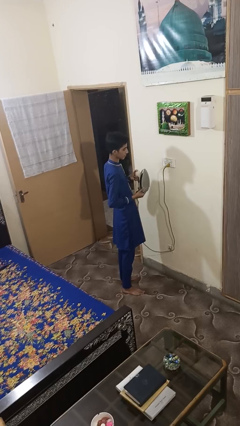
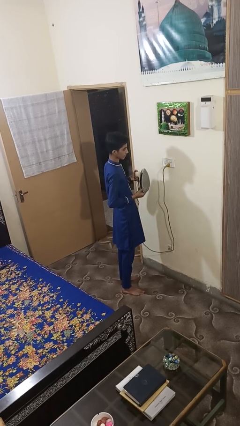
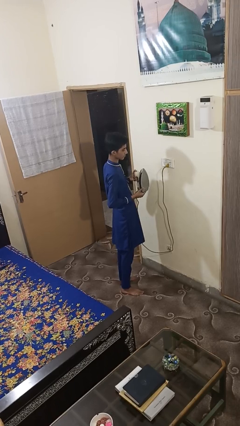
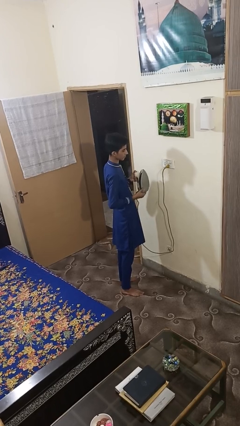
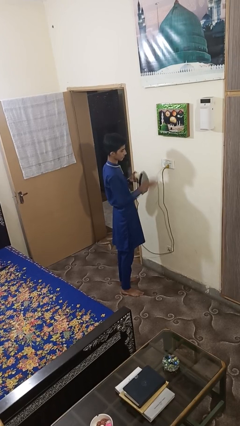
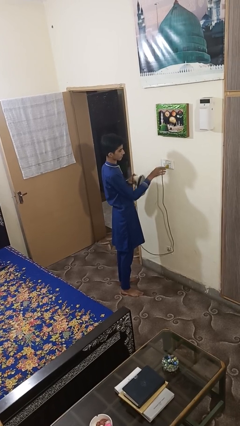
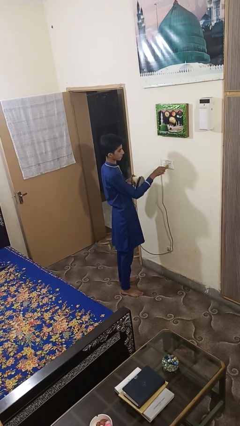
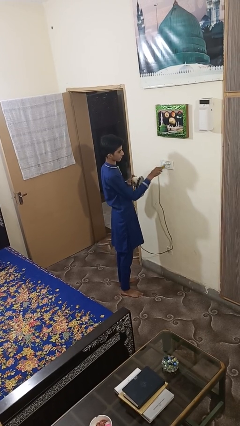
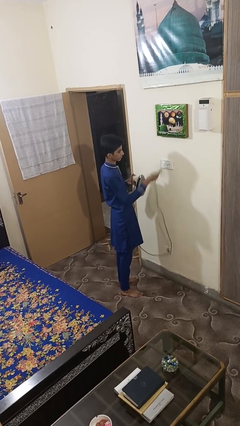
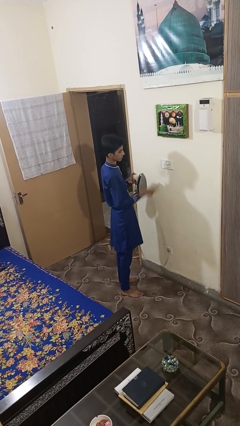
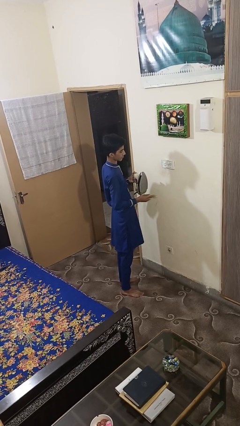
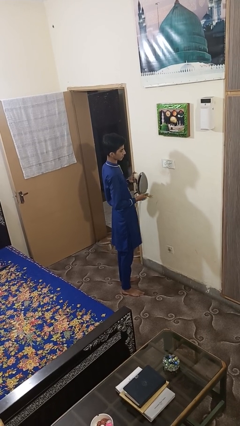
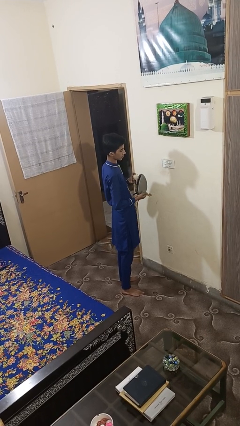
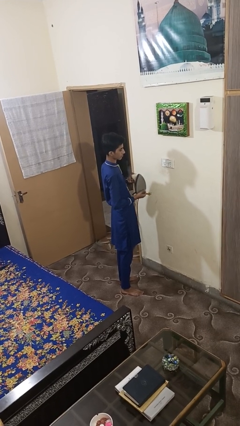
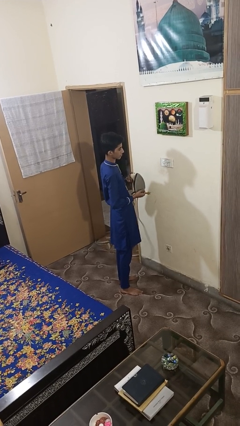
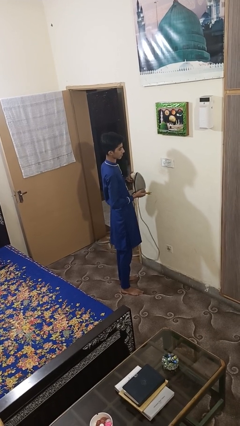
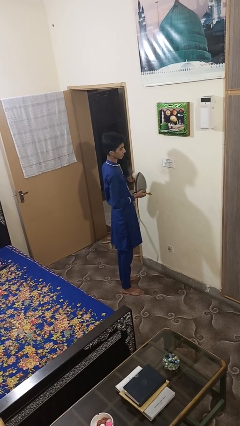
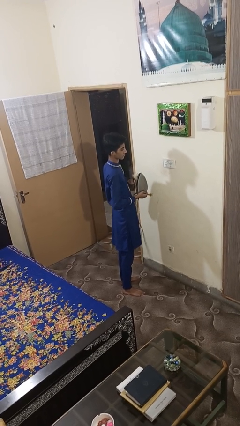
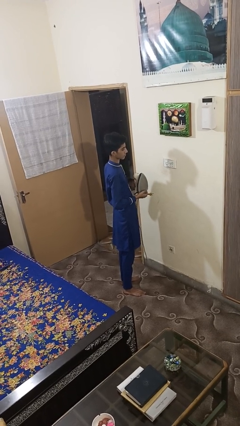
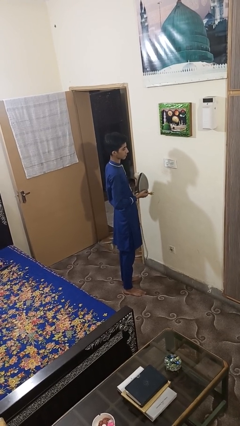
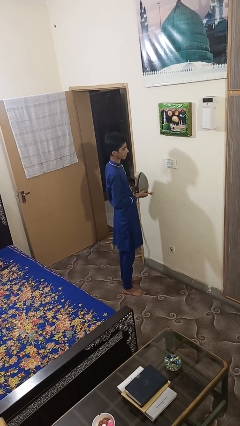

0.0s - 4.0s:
person unplugs from electrical socket

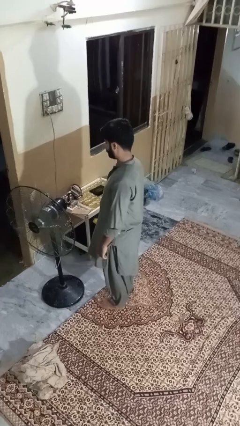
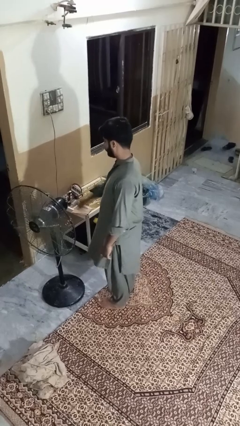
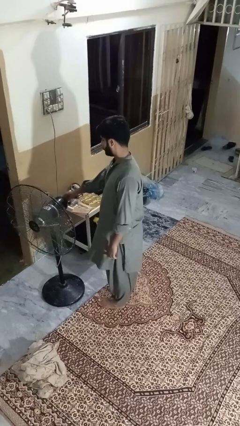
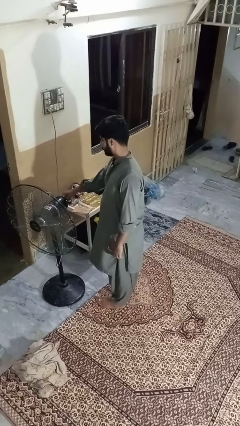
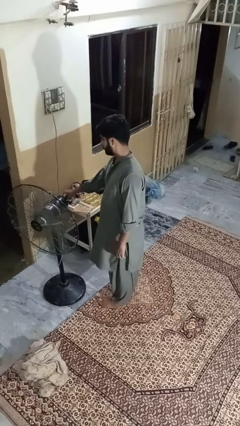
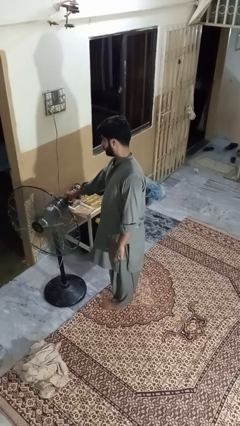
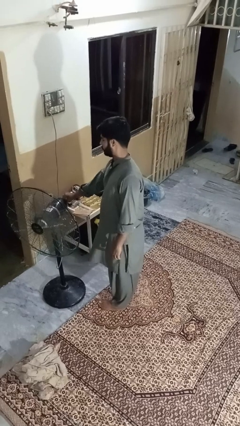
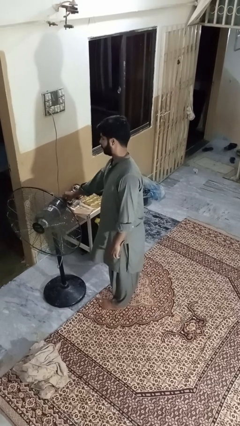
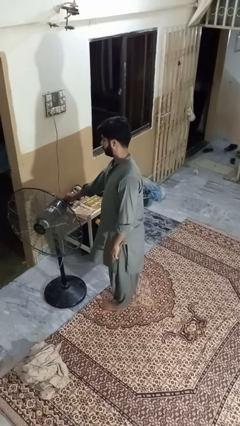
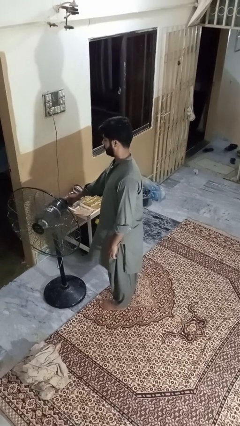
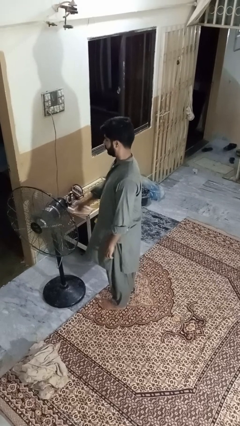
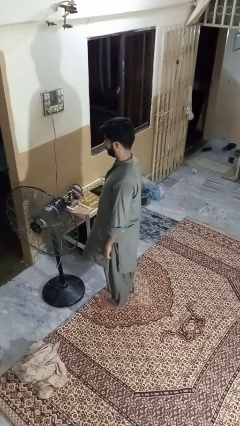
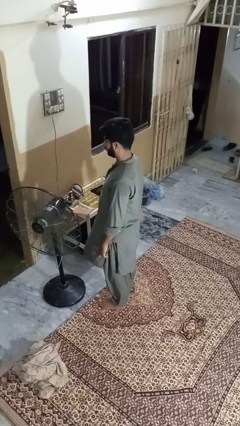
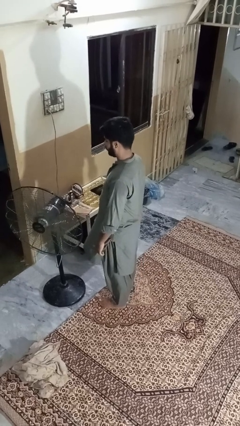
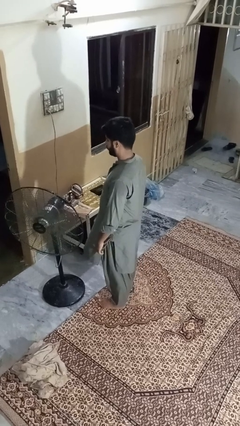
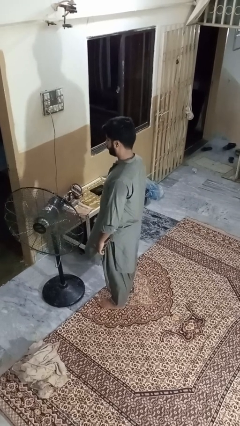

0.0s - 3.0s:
person turns off fan

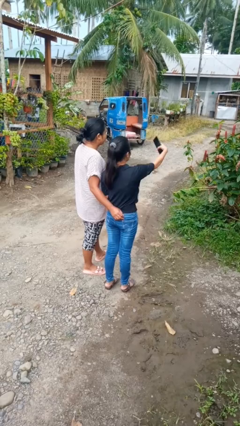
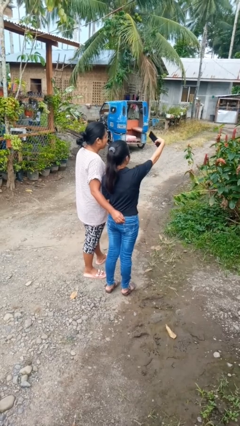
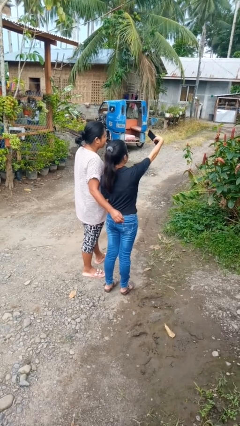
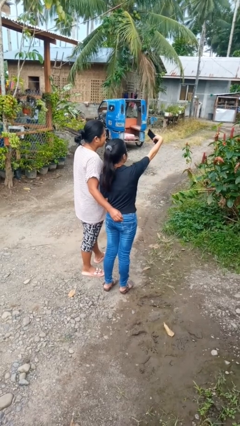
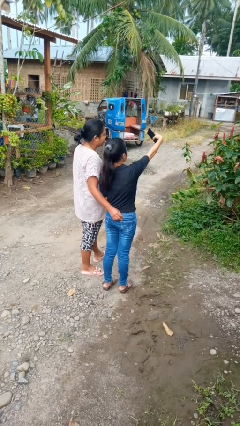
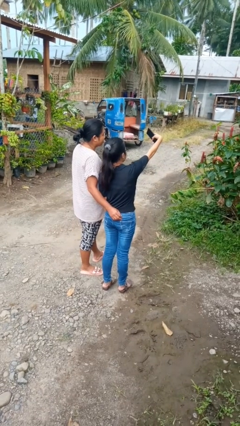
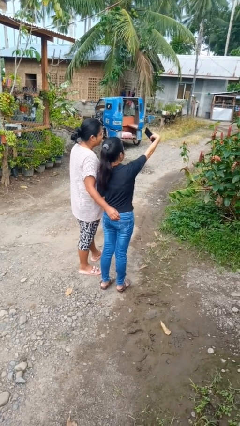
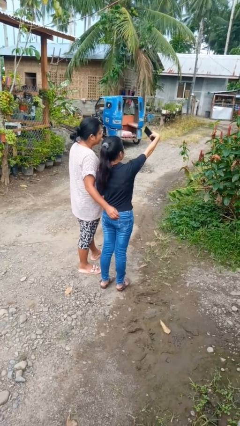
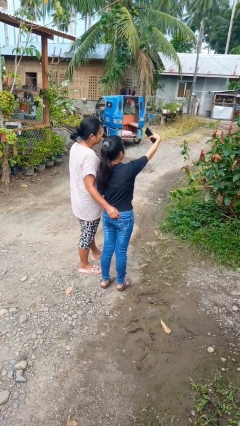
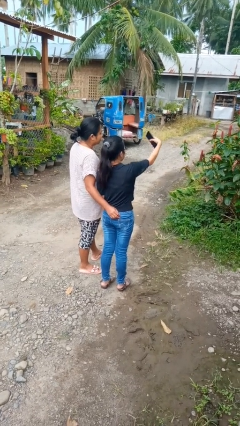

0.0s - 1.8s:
person takes selfie with person

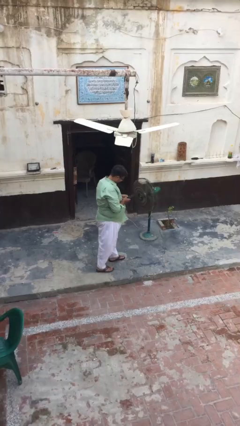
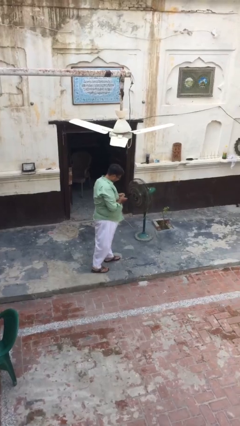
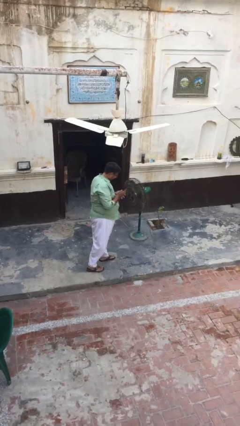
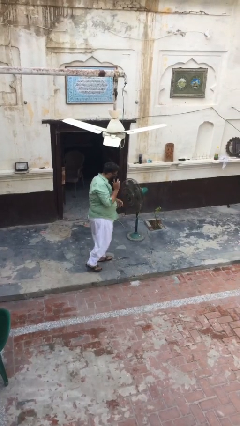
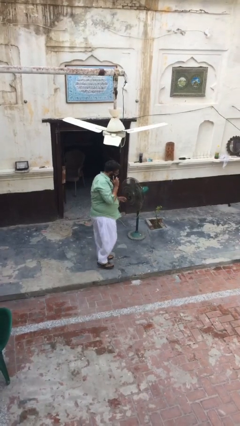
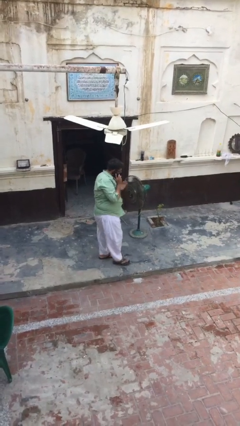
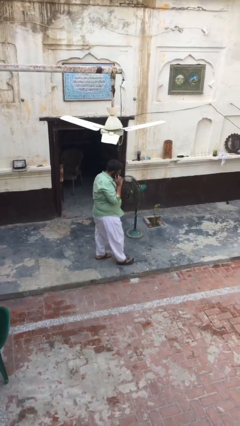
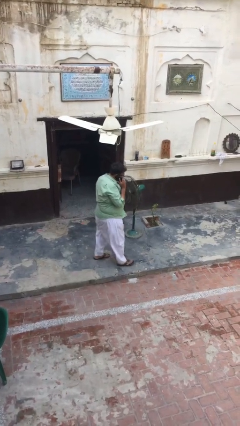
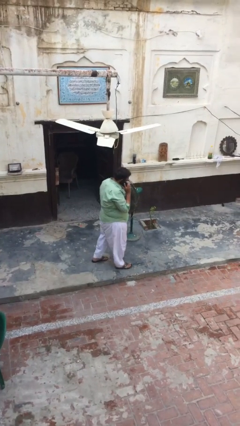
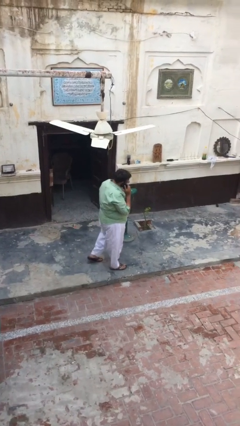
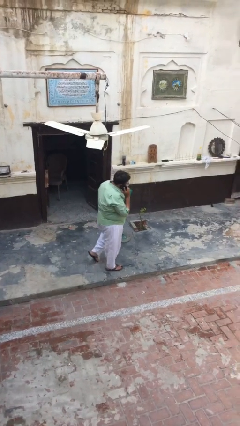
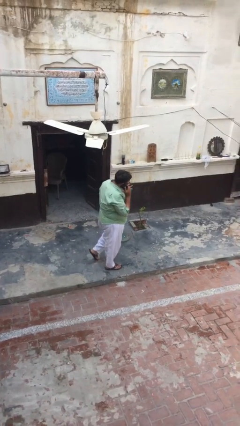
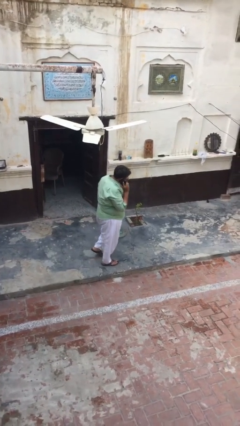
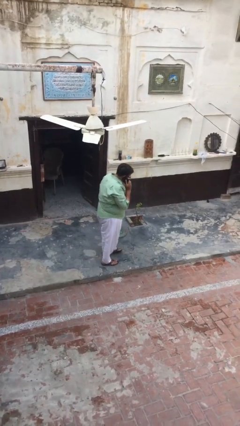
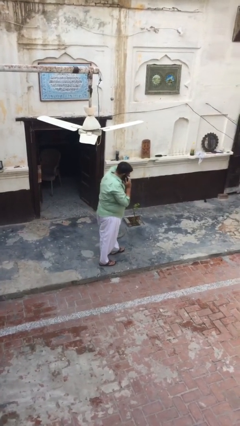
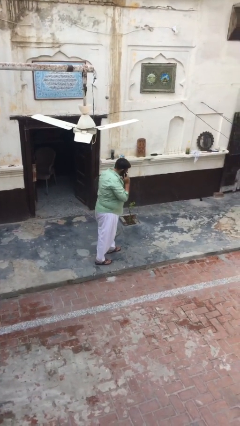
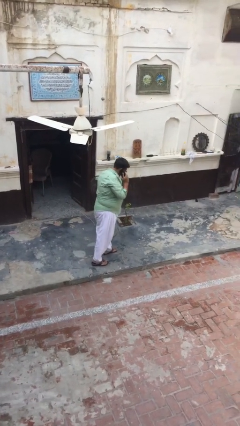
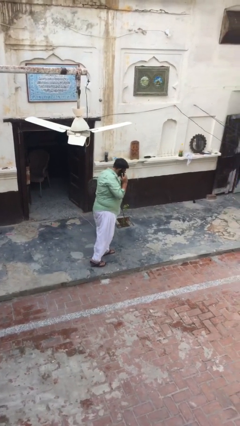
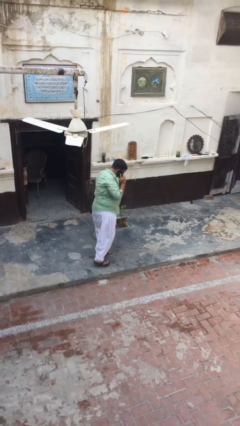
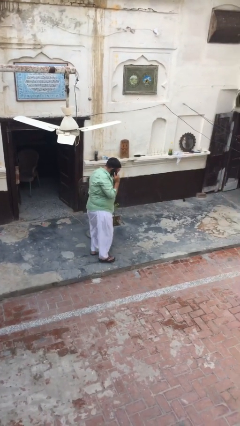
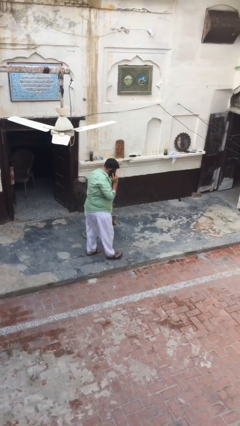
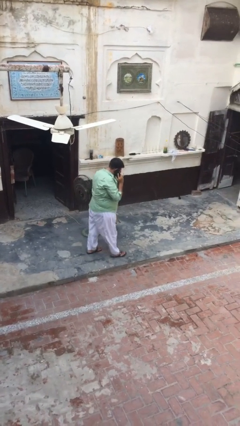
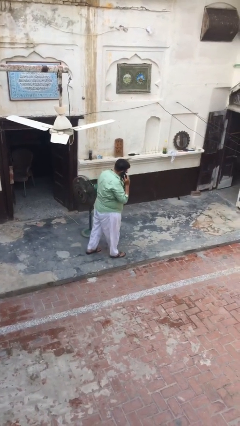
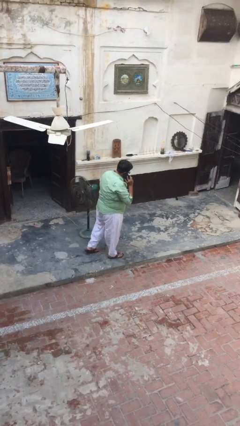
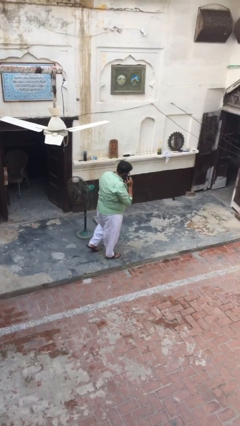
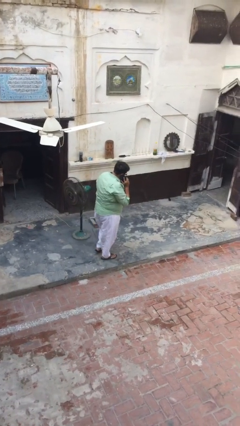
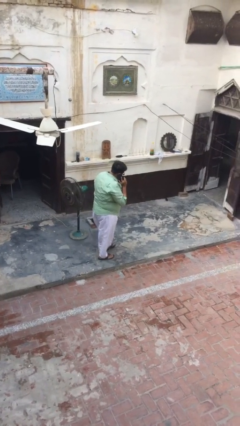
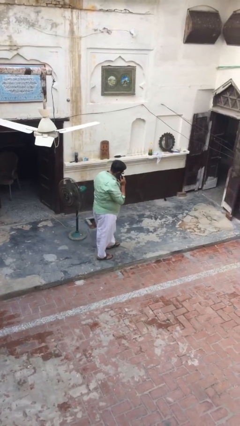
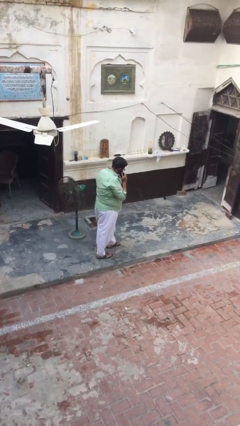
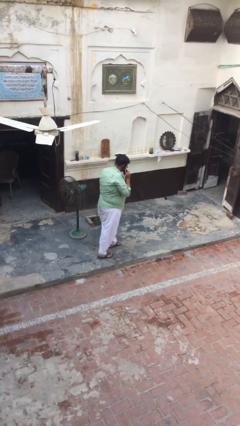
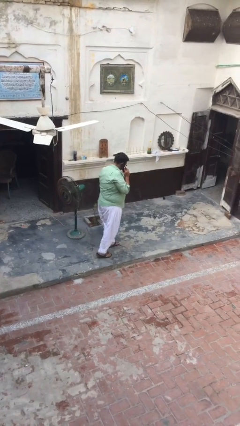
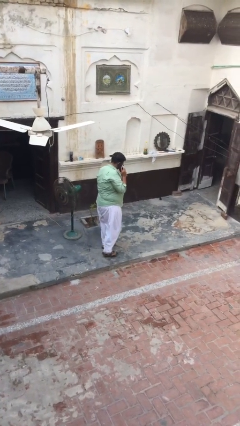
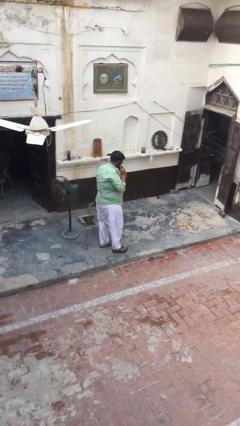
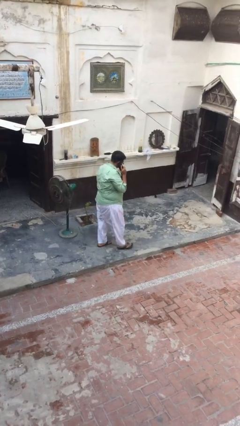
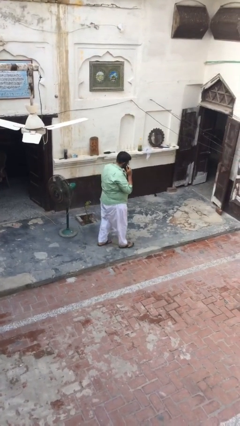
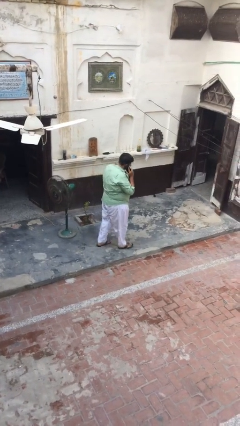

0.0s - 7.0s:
person talks on phone

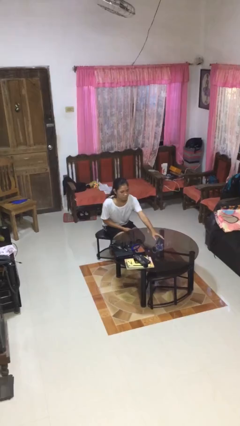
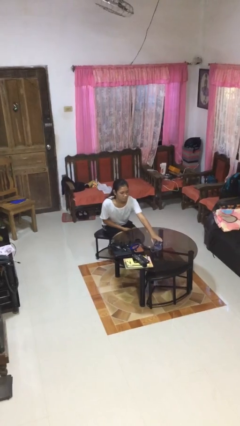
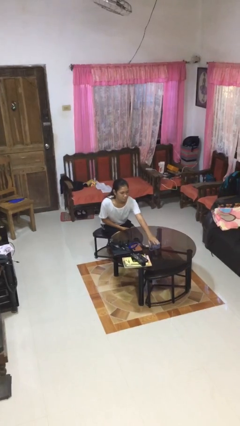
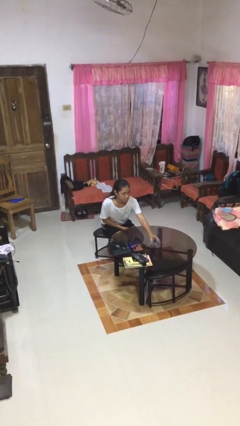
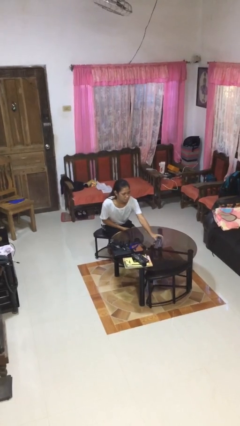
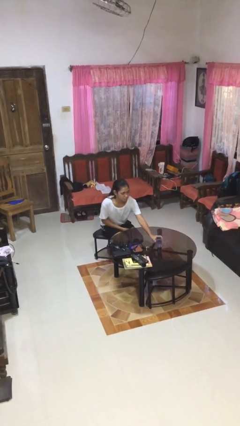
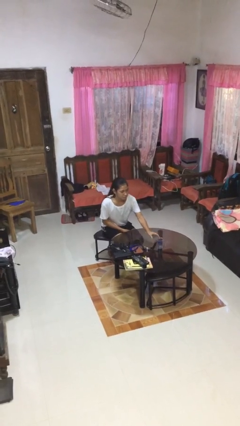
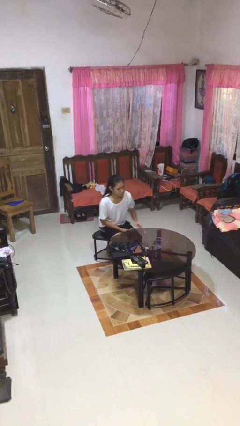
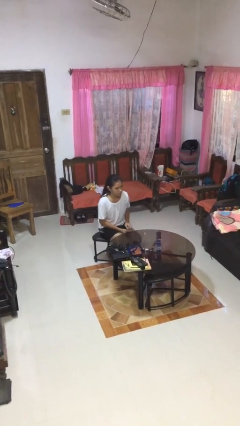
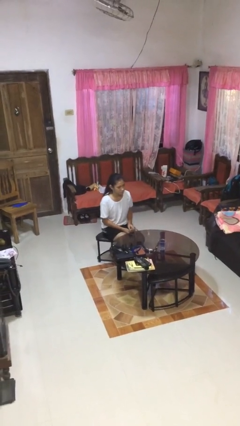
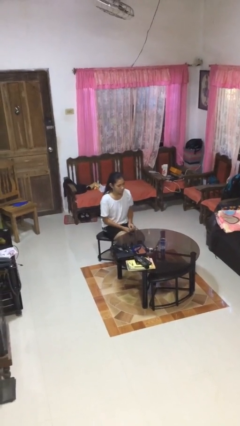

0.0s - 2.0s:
person sets upright glass
